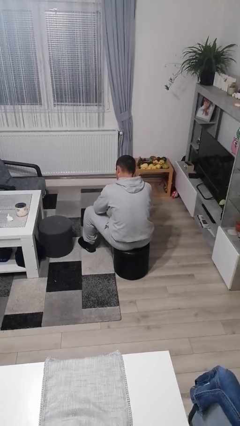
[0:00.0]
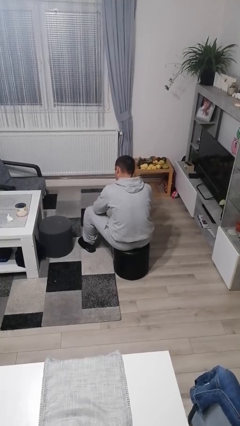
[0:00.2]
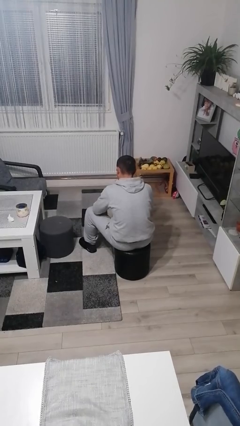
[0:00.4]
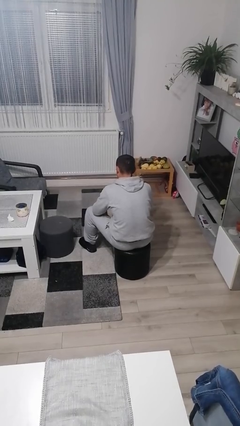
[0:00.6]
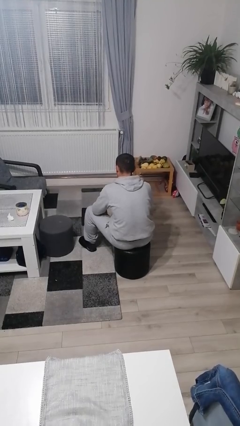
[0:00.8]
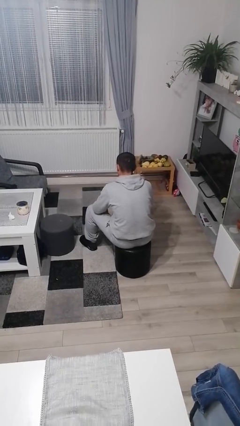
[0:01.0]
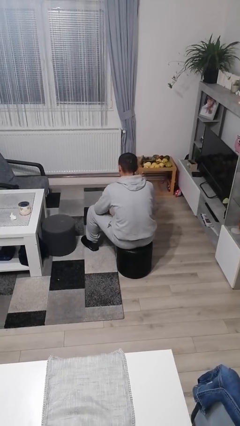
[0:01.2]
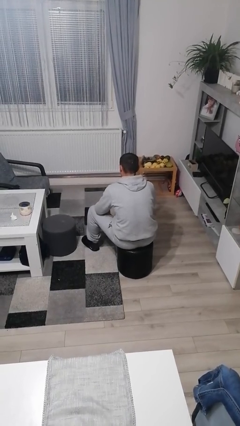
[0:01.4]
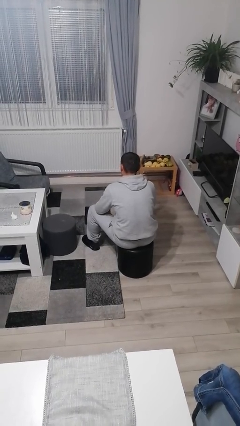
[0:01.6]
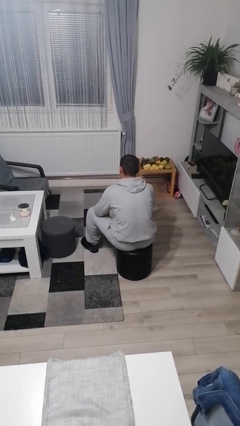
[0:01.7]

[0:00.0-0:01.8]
person gestures behind me

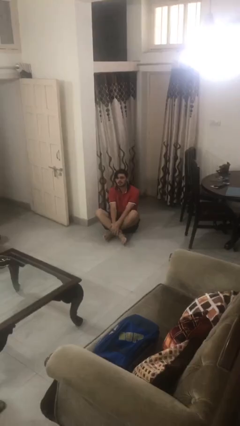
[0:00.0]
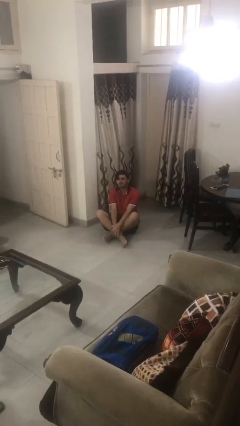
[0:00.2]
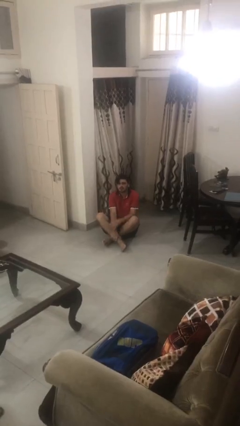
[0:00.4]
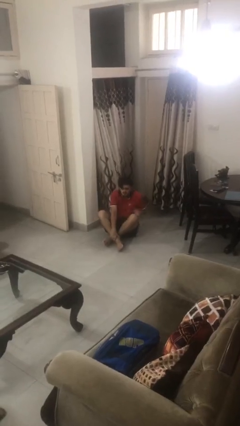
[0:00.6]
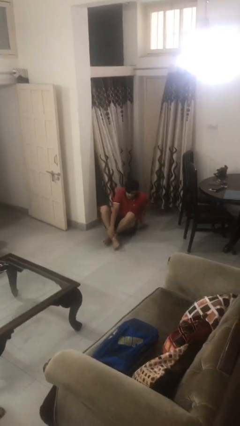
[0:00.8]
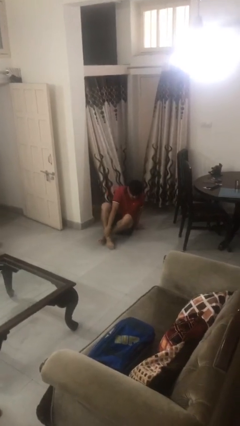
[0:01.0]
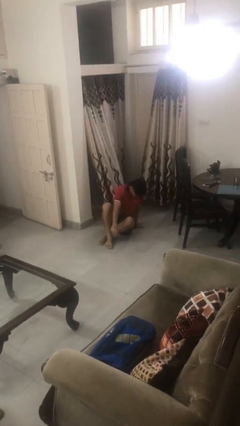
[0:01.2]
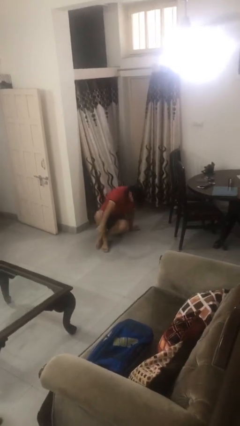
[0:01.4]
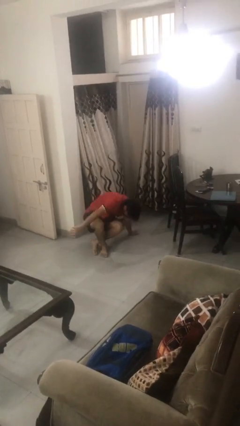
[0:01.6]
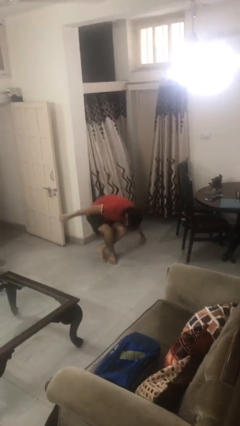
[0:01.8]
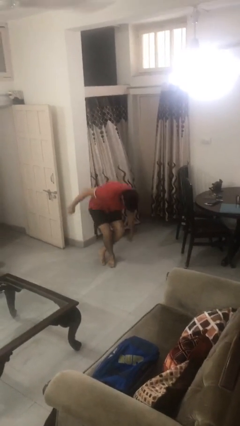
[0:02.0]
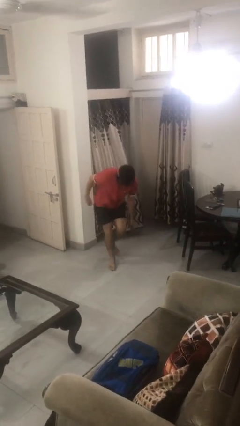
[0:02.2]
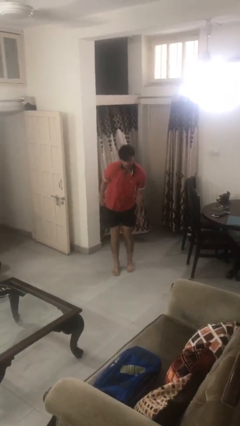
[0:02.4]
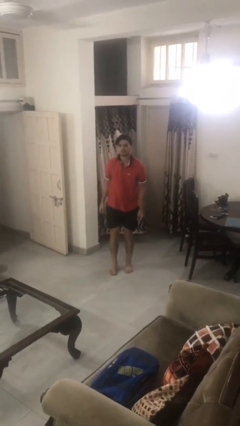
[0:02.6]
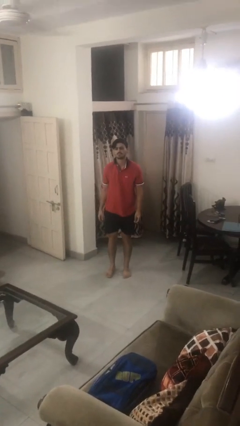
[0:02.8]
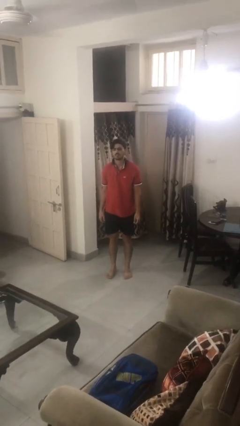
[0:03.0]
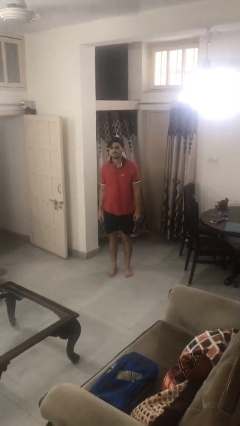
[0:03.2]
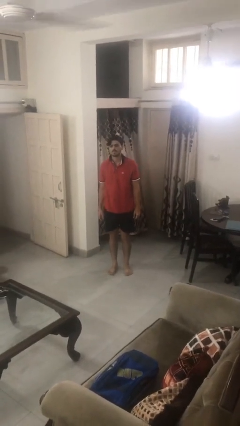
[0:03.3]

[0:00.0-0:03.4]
person stands up from floor

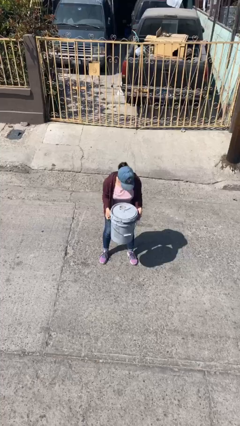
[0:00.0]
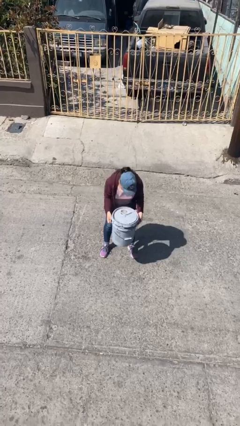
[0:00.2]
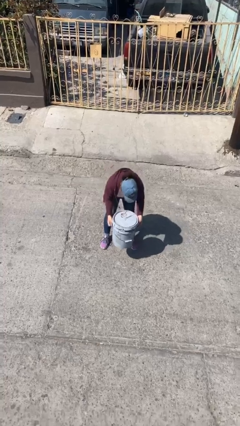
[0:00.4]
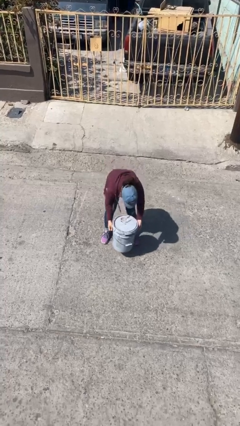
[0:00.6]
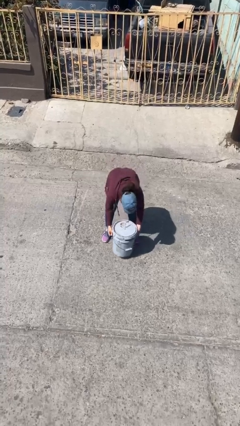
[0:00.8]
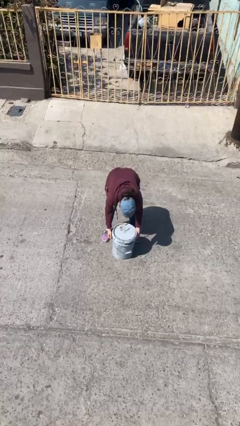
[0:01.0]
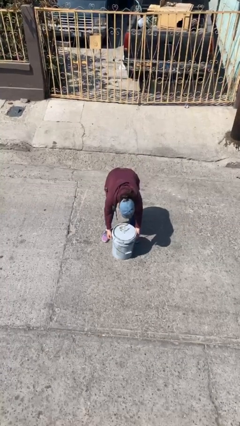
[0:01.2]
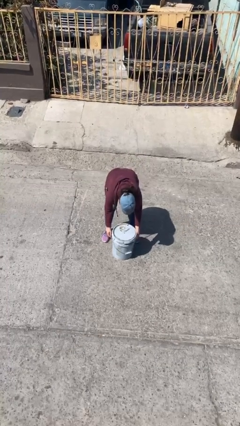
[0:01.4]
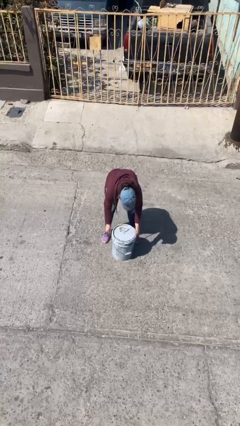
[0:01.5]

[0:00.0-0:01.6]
person puts down object on floor

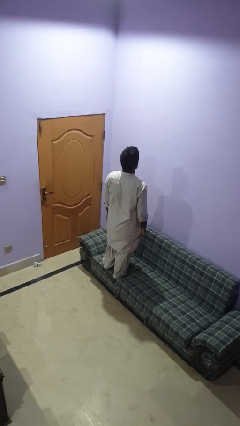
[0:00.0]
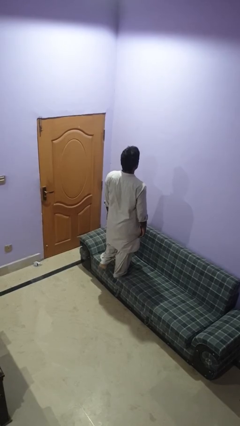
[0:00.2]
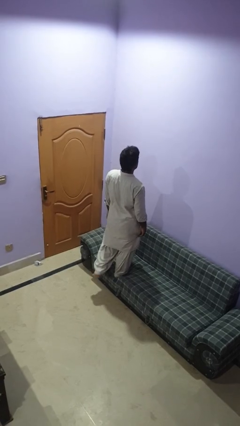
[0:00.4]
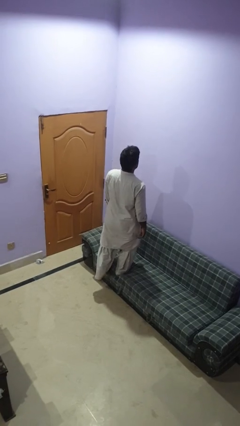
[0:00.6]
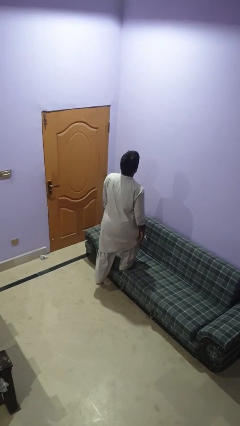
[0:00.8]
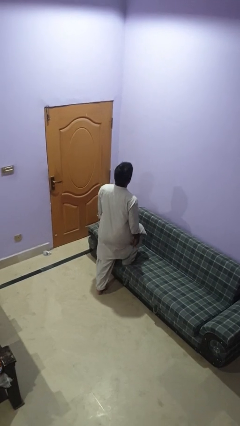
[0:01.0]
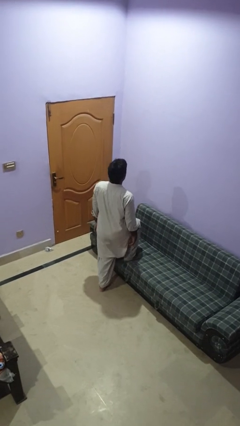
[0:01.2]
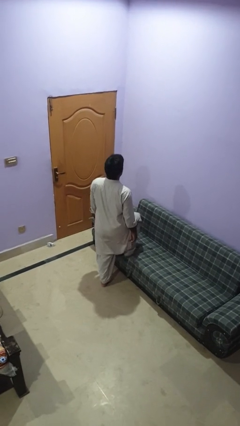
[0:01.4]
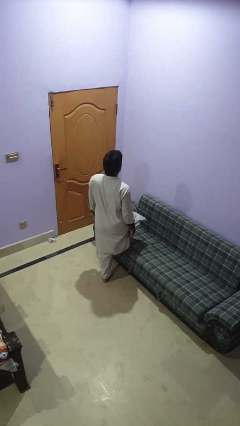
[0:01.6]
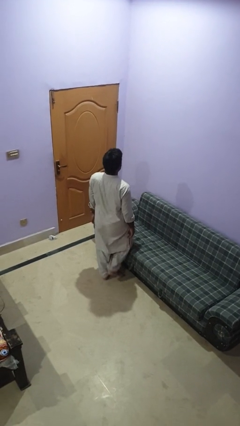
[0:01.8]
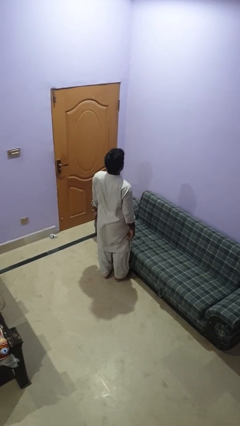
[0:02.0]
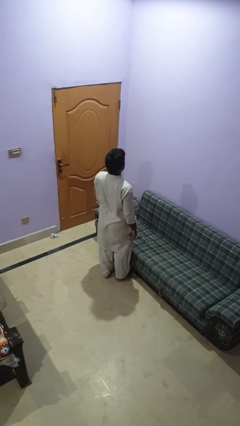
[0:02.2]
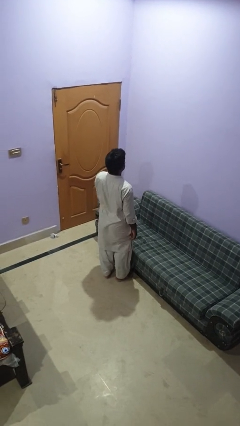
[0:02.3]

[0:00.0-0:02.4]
person climbs off couch

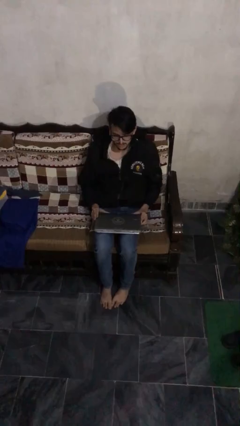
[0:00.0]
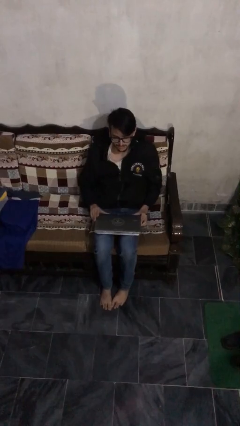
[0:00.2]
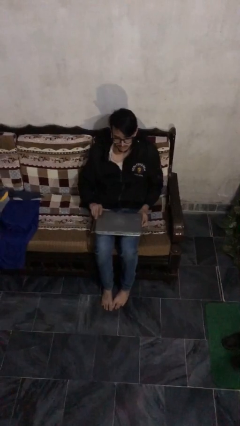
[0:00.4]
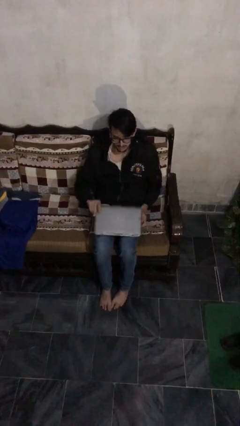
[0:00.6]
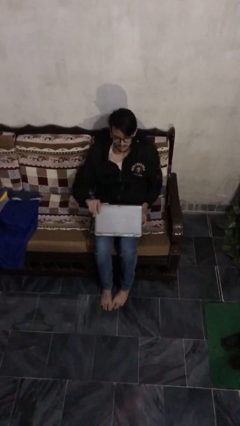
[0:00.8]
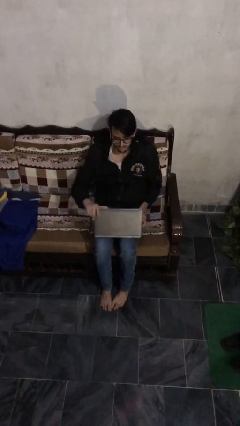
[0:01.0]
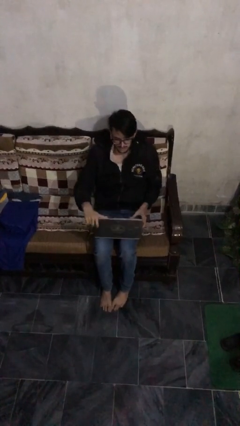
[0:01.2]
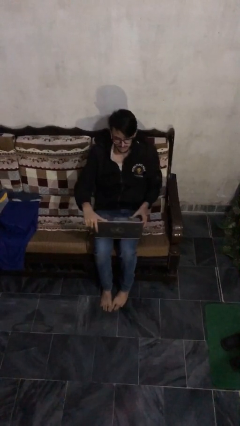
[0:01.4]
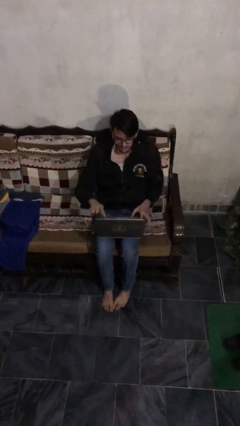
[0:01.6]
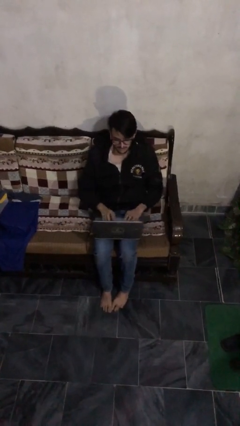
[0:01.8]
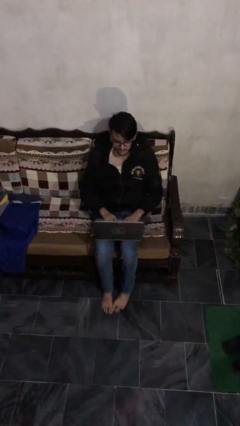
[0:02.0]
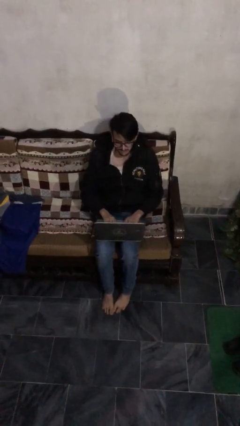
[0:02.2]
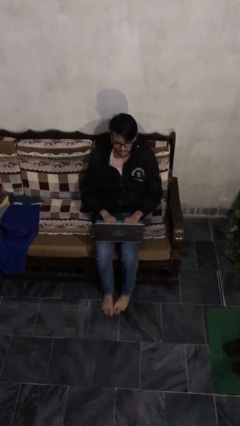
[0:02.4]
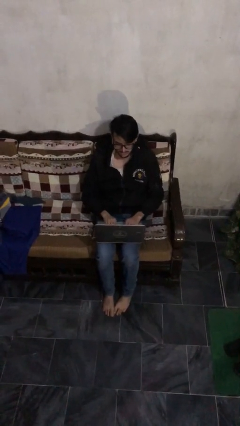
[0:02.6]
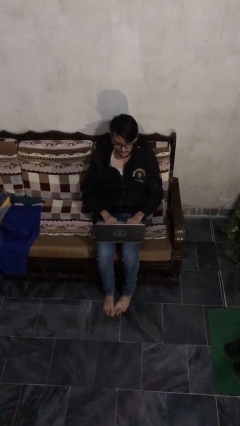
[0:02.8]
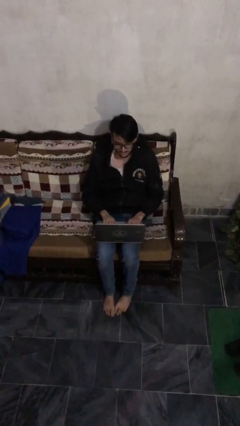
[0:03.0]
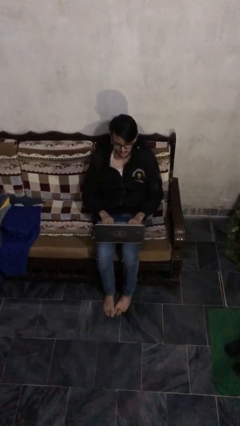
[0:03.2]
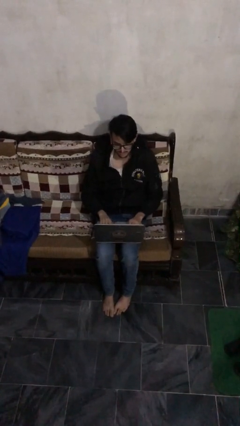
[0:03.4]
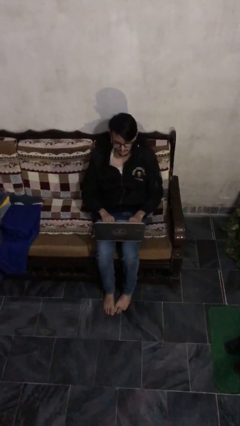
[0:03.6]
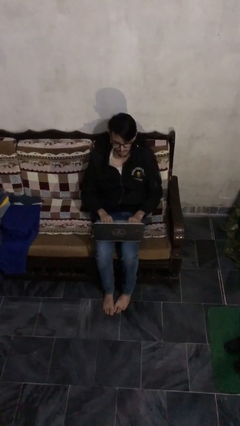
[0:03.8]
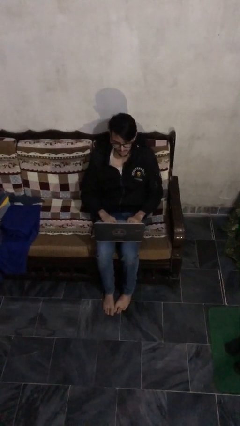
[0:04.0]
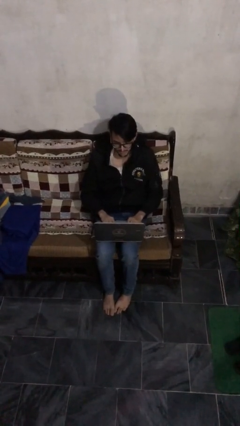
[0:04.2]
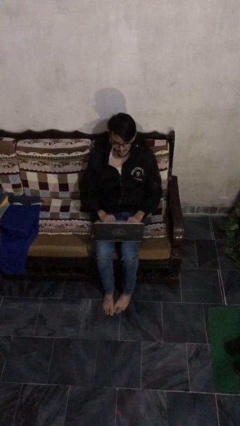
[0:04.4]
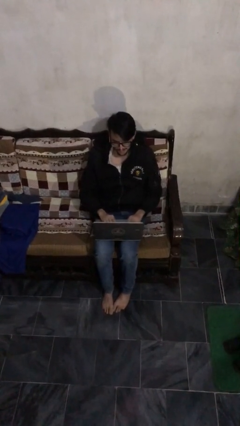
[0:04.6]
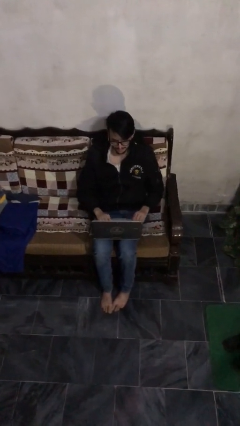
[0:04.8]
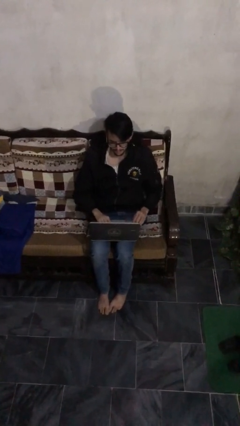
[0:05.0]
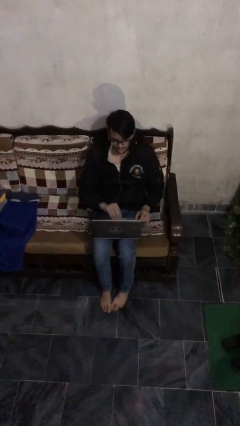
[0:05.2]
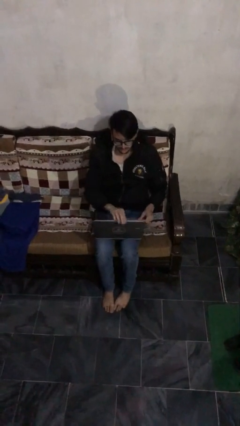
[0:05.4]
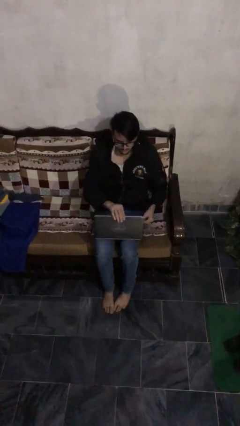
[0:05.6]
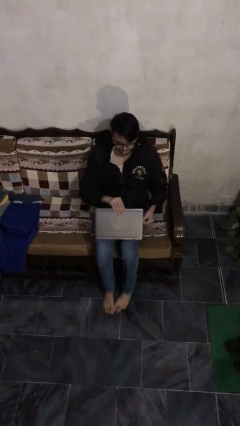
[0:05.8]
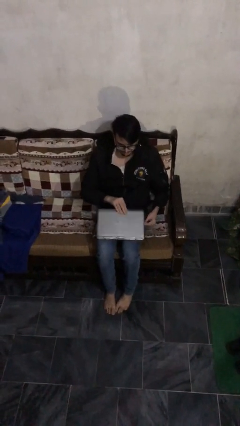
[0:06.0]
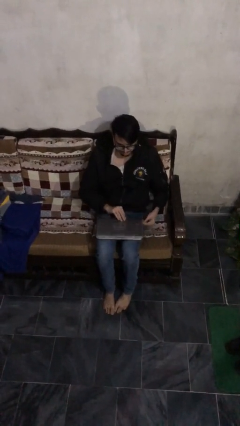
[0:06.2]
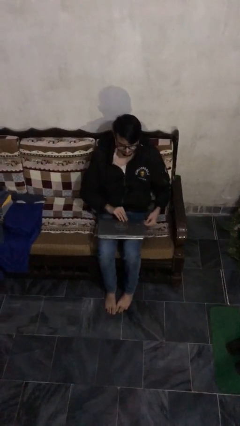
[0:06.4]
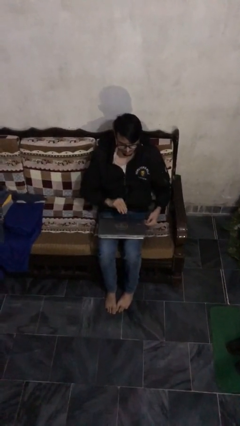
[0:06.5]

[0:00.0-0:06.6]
person interacts with laptop

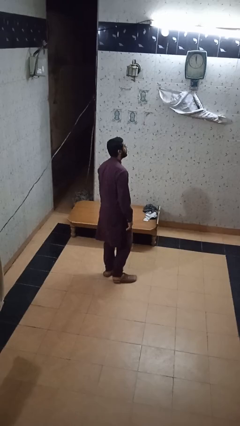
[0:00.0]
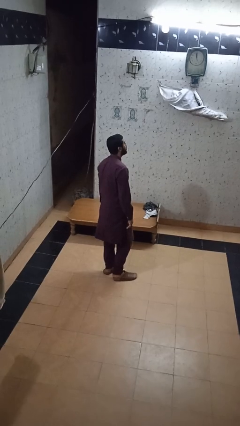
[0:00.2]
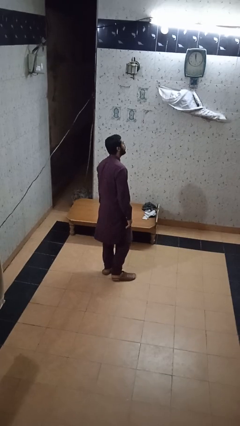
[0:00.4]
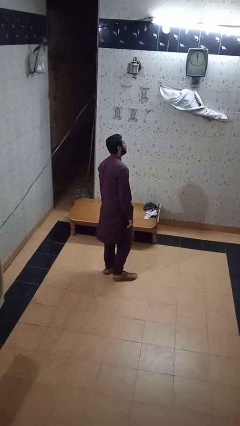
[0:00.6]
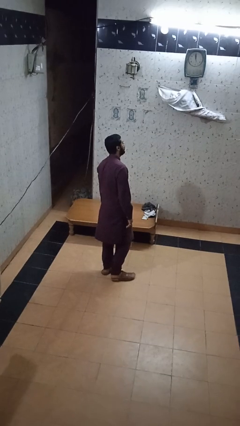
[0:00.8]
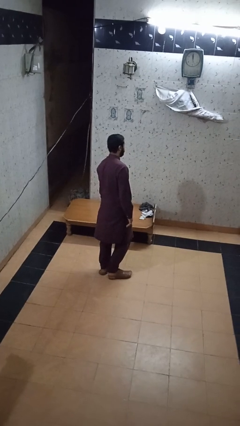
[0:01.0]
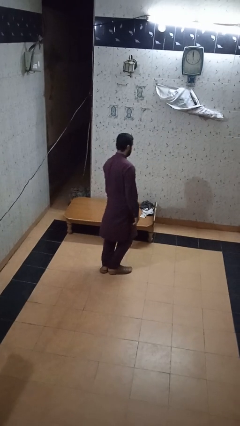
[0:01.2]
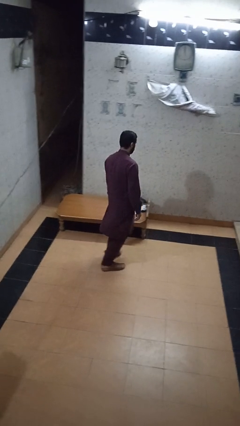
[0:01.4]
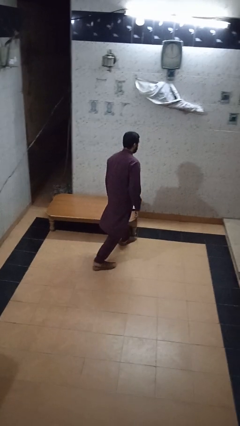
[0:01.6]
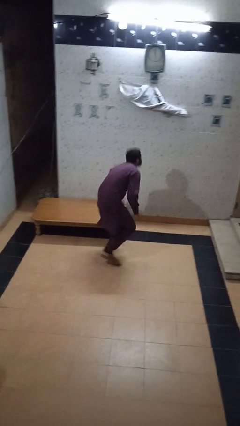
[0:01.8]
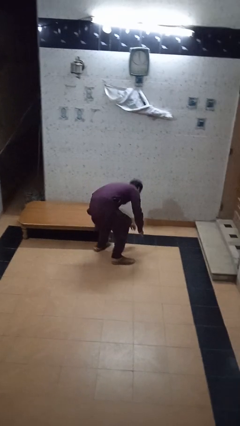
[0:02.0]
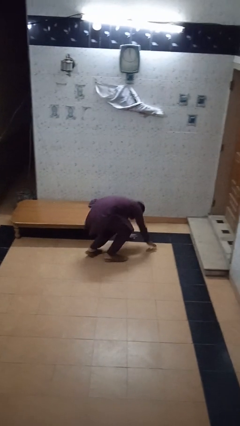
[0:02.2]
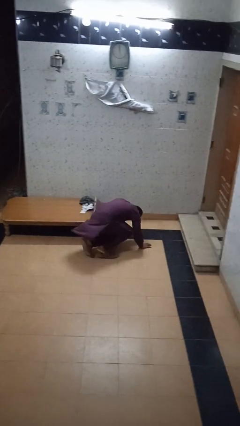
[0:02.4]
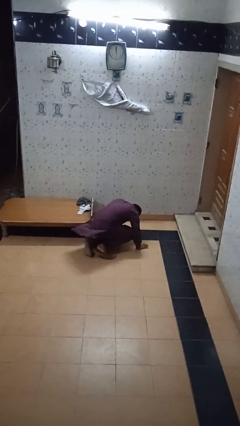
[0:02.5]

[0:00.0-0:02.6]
person trips on object on floor
